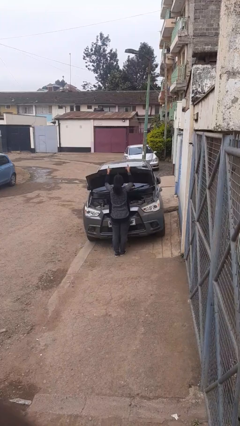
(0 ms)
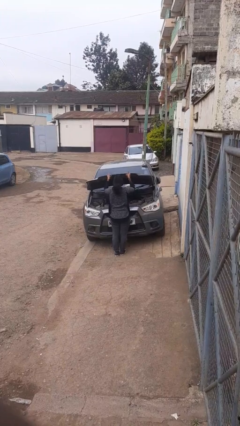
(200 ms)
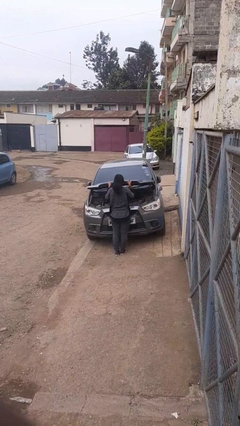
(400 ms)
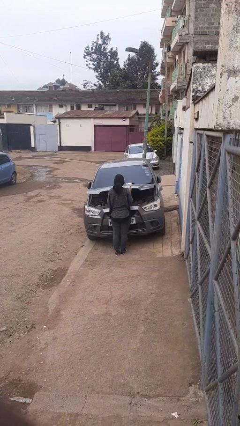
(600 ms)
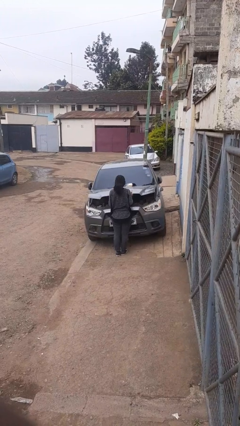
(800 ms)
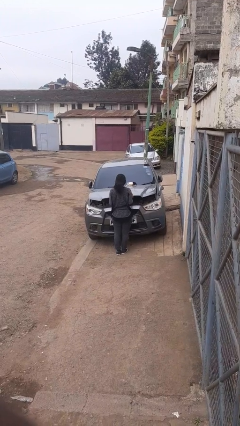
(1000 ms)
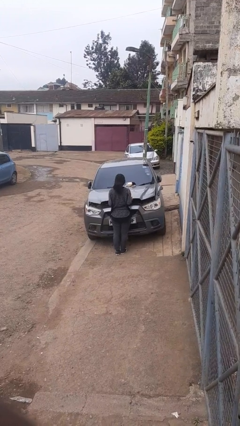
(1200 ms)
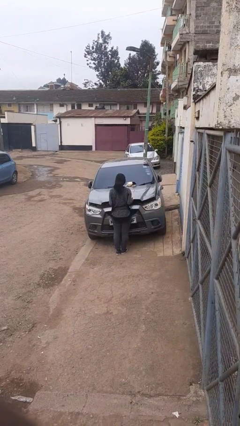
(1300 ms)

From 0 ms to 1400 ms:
person closes car hood

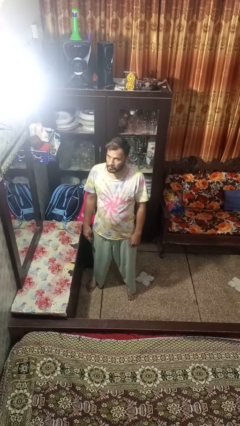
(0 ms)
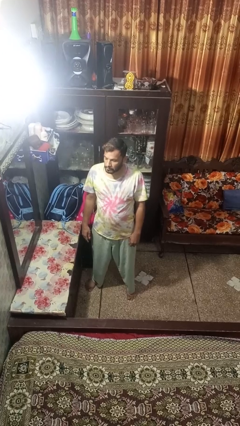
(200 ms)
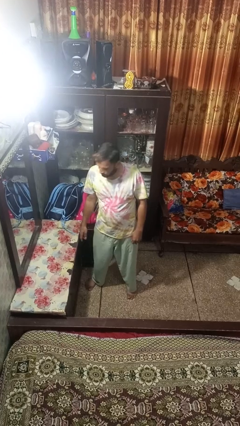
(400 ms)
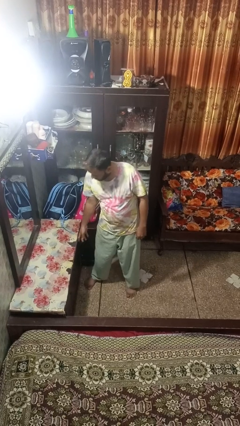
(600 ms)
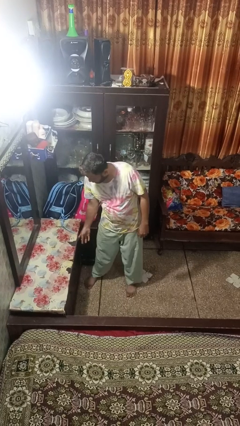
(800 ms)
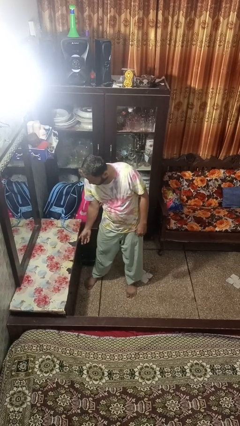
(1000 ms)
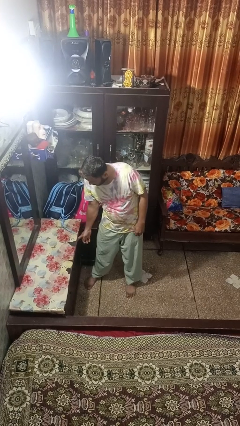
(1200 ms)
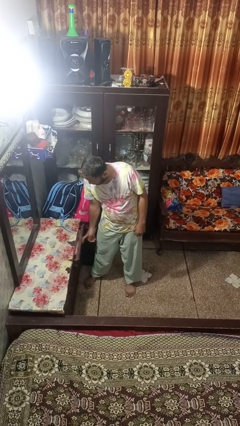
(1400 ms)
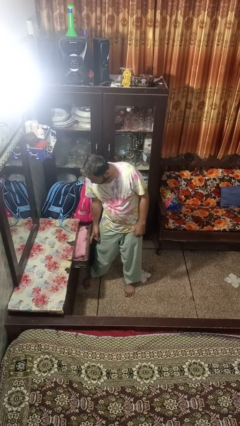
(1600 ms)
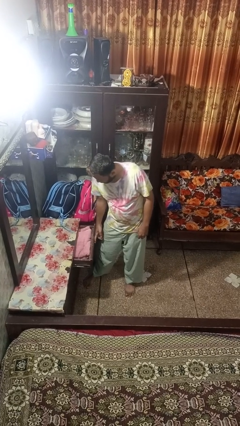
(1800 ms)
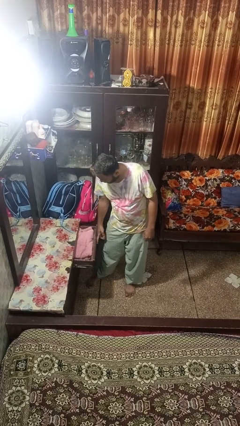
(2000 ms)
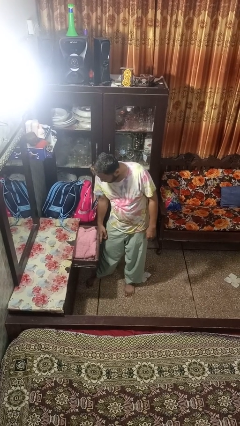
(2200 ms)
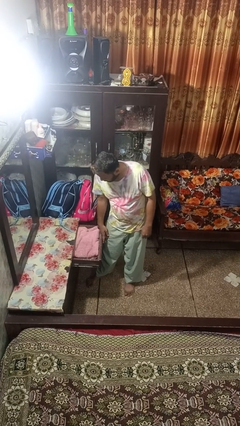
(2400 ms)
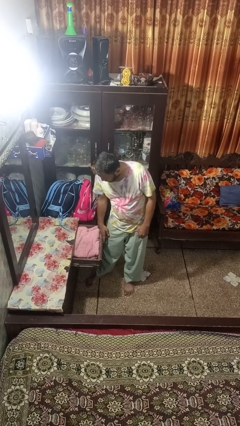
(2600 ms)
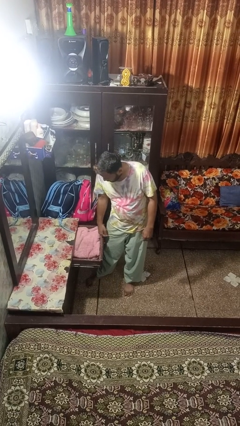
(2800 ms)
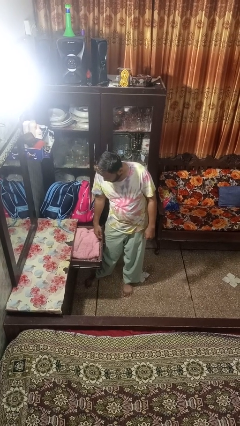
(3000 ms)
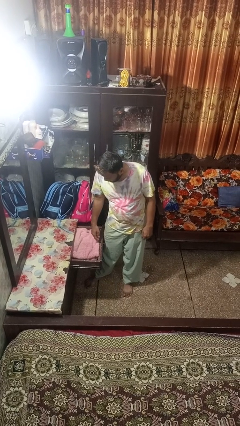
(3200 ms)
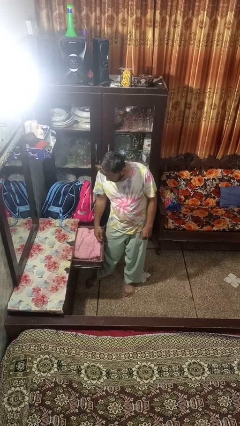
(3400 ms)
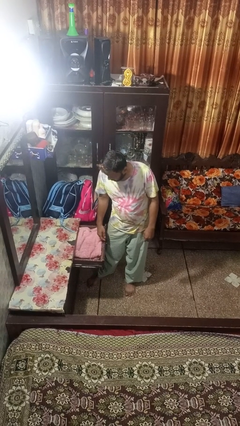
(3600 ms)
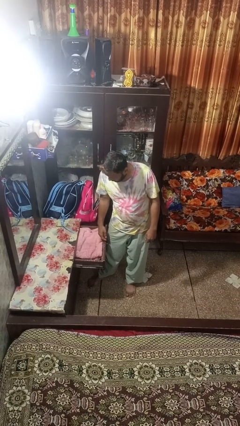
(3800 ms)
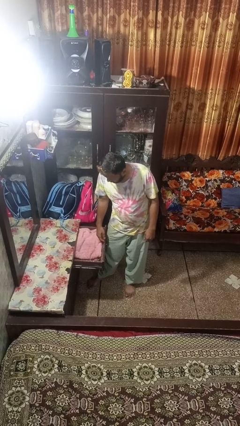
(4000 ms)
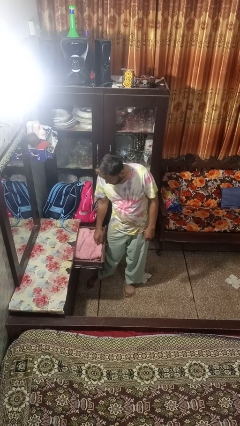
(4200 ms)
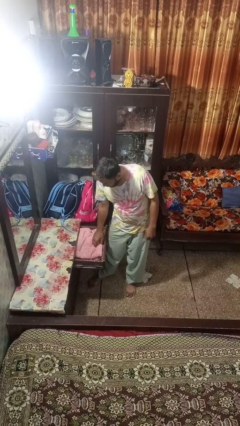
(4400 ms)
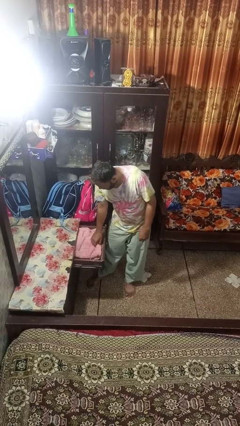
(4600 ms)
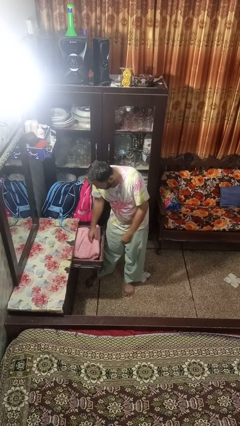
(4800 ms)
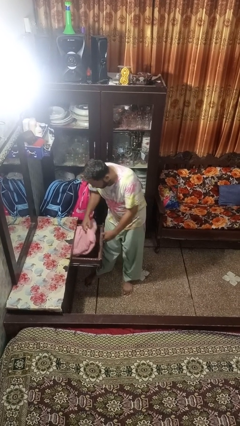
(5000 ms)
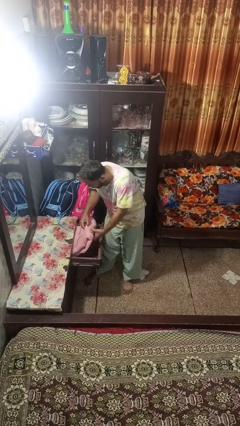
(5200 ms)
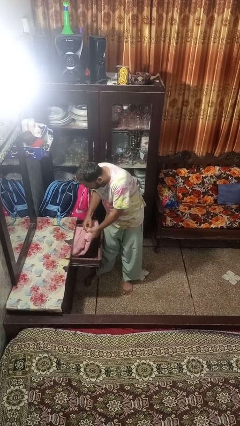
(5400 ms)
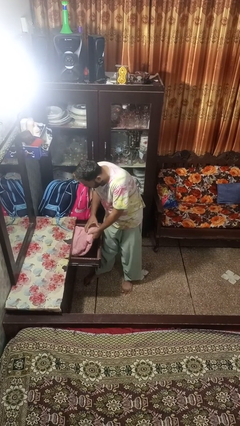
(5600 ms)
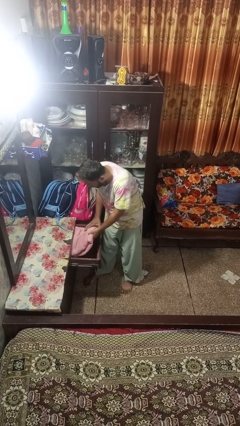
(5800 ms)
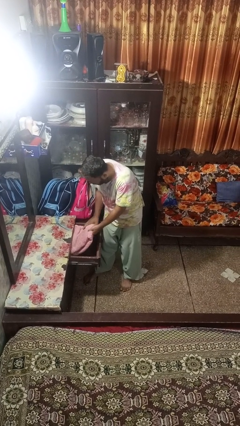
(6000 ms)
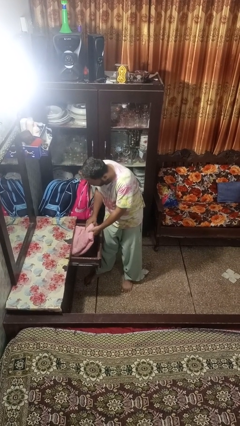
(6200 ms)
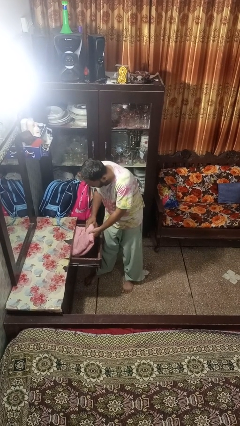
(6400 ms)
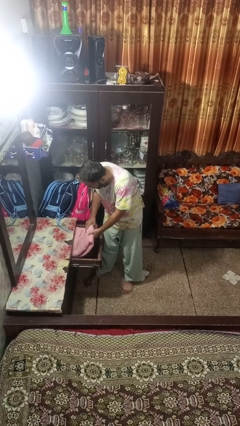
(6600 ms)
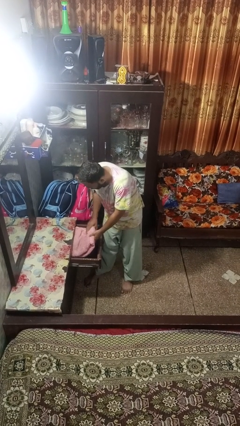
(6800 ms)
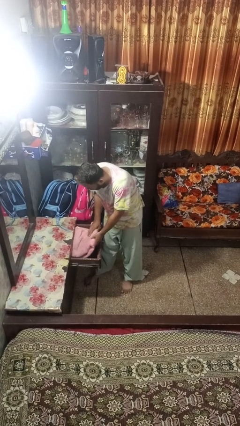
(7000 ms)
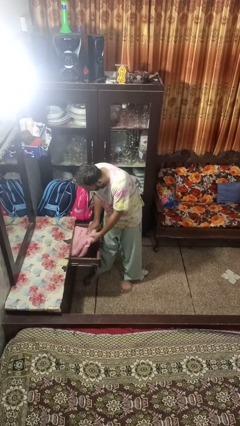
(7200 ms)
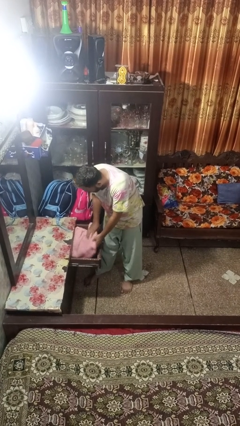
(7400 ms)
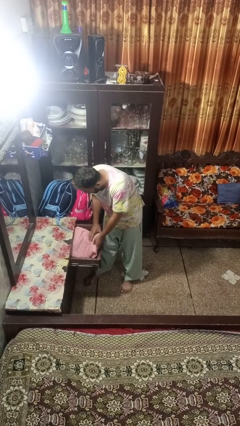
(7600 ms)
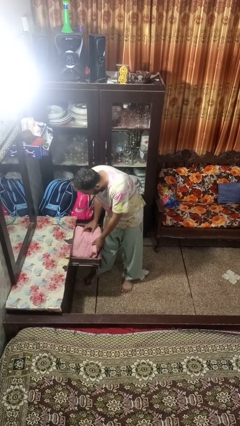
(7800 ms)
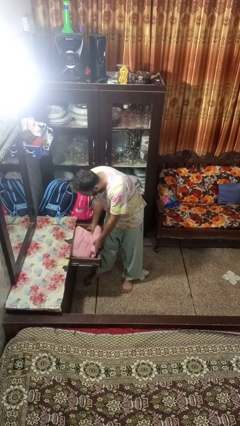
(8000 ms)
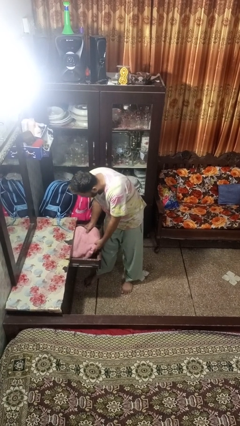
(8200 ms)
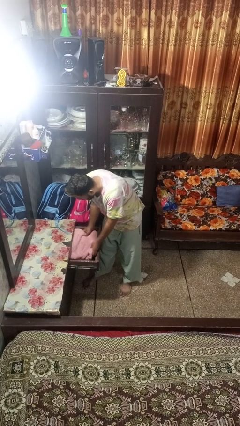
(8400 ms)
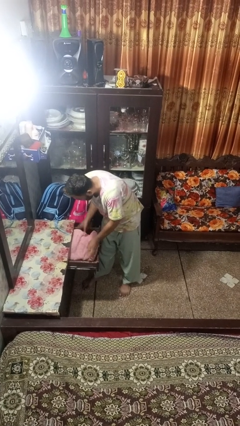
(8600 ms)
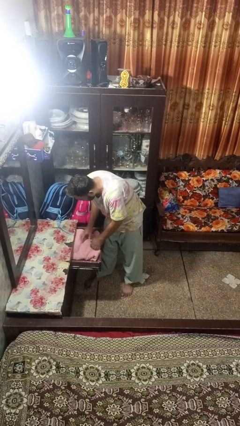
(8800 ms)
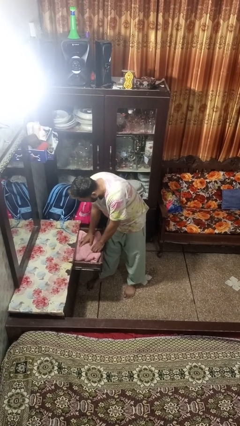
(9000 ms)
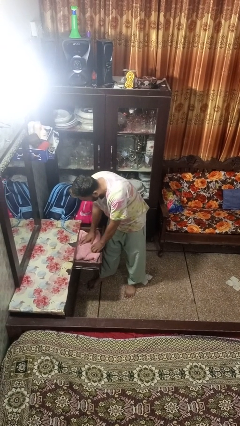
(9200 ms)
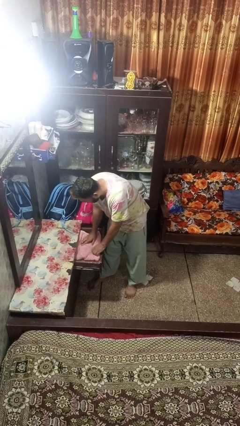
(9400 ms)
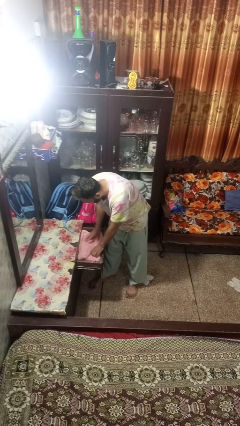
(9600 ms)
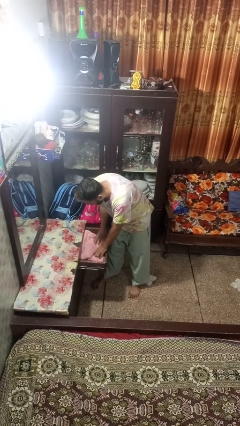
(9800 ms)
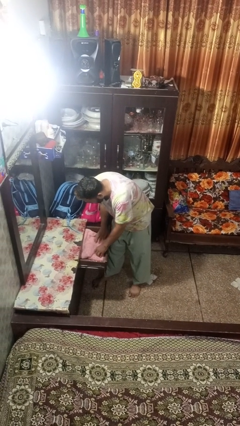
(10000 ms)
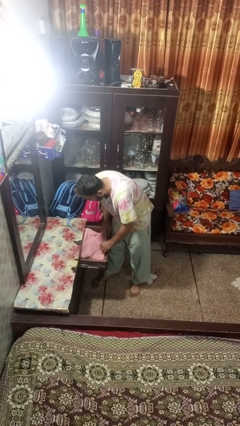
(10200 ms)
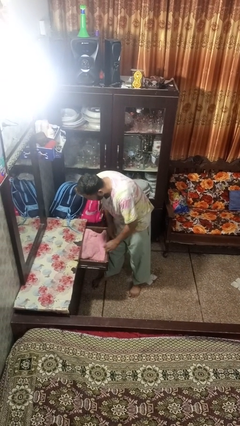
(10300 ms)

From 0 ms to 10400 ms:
person opens dresser drawer

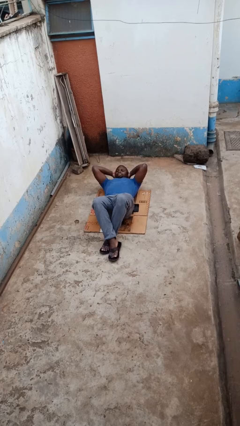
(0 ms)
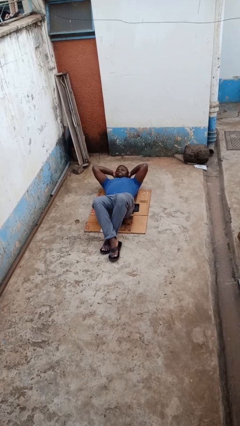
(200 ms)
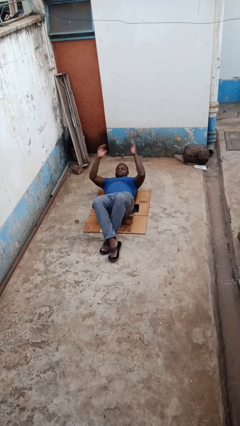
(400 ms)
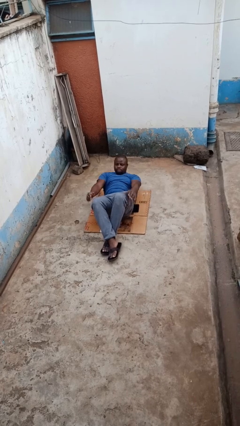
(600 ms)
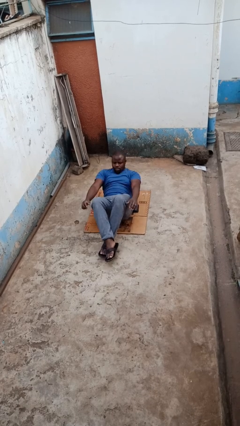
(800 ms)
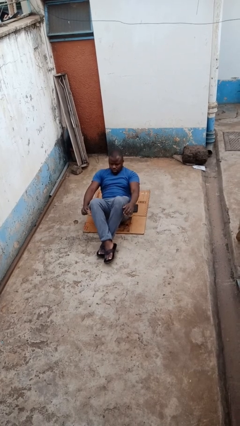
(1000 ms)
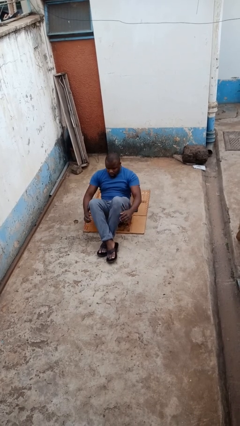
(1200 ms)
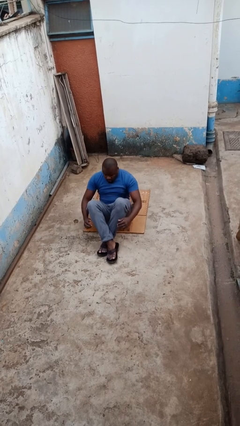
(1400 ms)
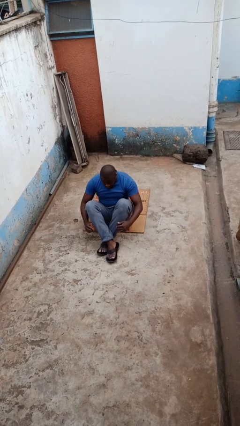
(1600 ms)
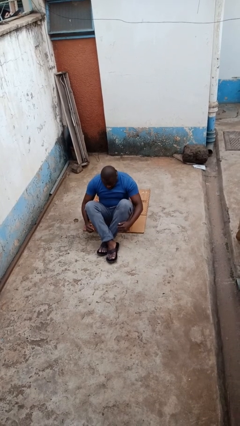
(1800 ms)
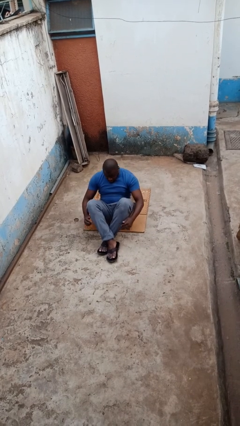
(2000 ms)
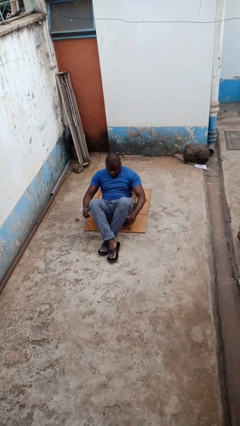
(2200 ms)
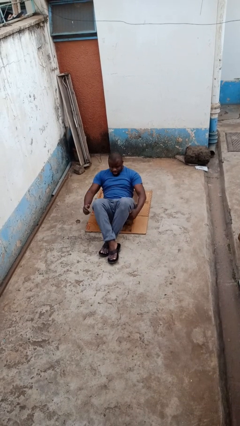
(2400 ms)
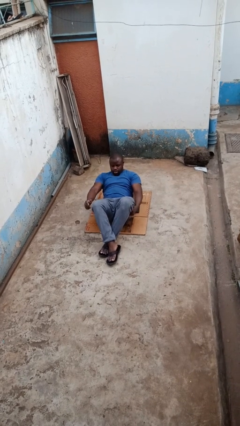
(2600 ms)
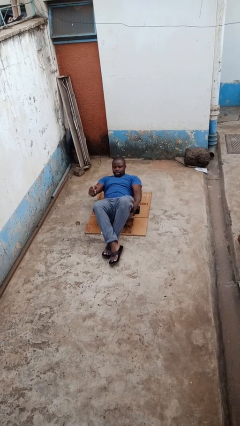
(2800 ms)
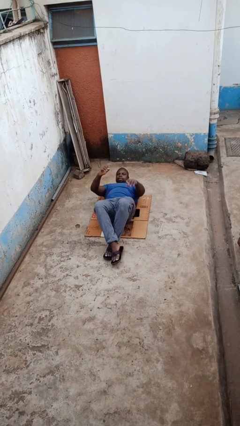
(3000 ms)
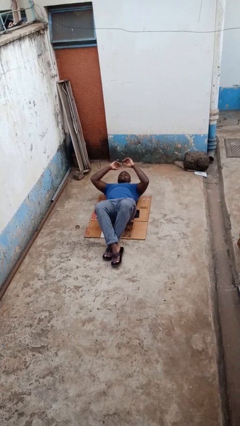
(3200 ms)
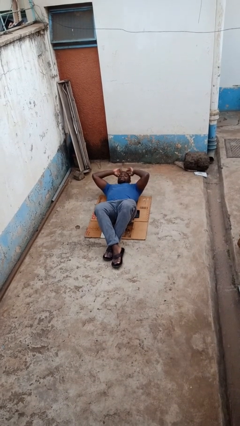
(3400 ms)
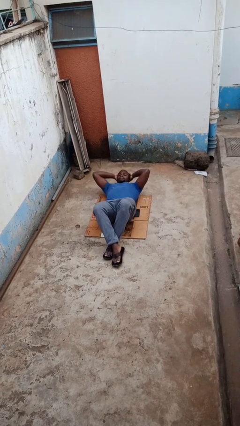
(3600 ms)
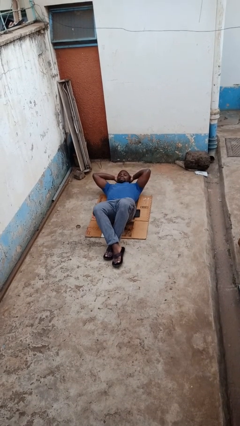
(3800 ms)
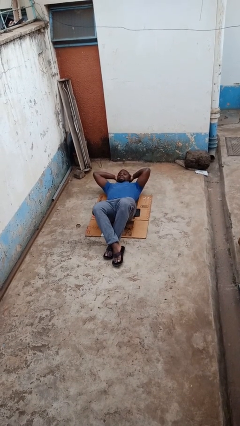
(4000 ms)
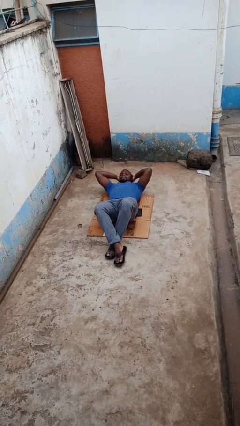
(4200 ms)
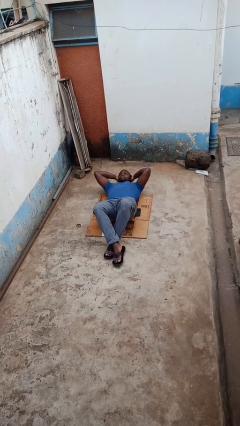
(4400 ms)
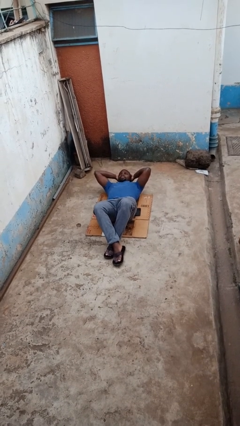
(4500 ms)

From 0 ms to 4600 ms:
person exercises with situp

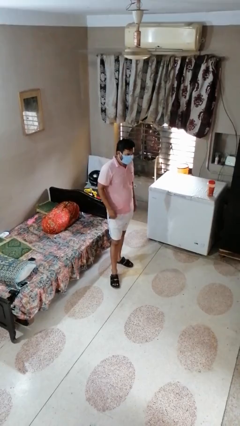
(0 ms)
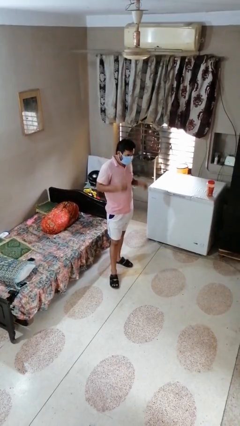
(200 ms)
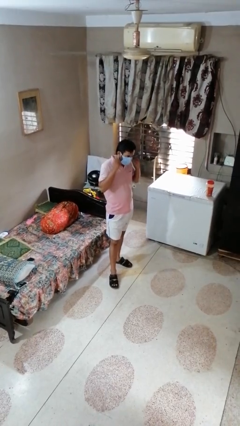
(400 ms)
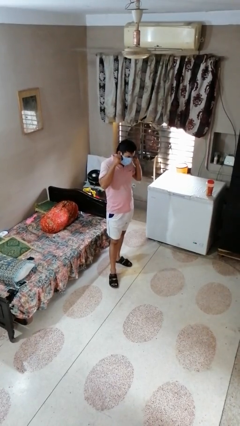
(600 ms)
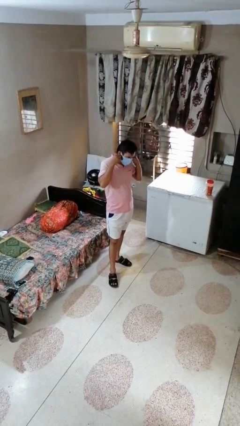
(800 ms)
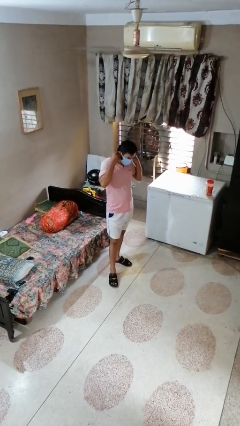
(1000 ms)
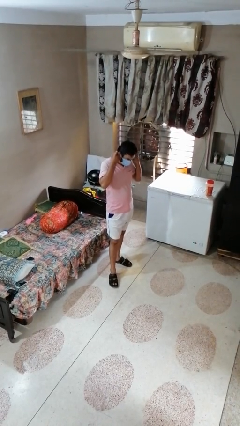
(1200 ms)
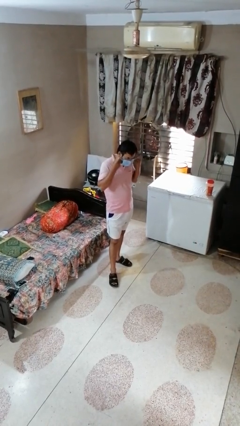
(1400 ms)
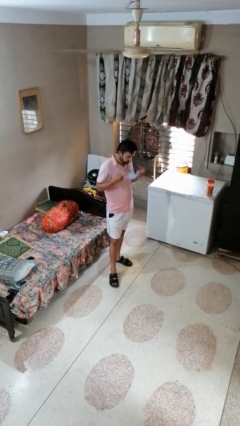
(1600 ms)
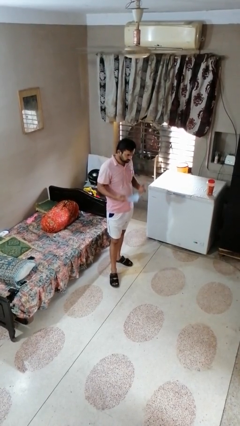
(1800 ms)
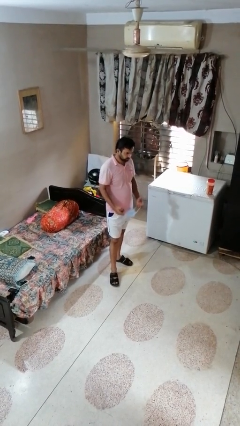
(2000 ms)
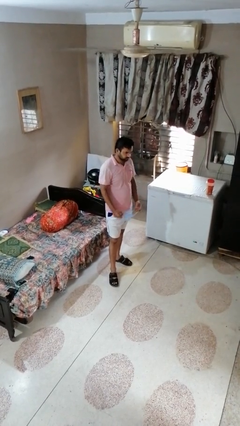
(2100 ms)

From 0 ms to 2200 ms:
person takes off facemask
